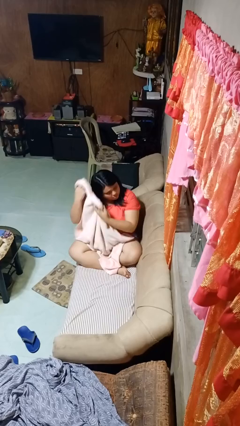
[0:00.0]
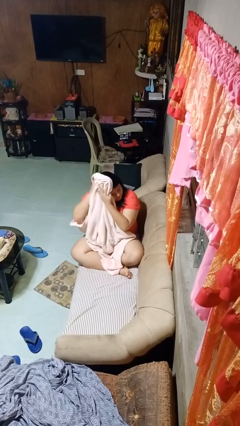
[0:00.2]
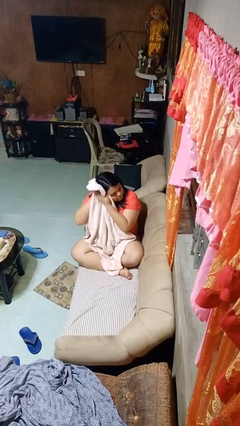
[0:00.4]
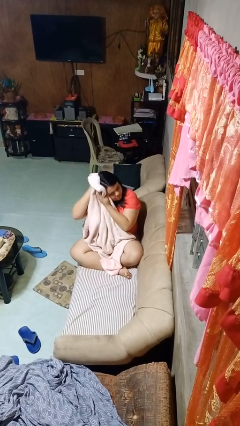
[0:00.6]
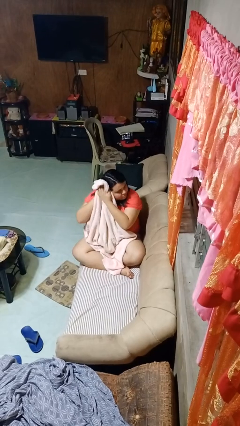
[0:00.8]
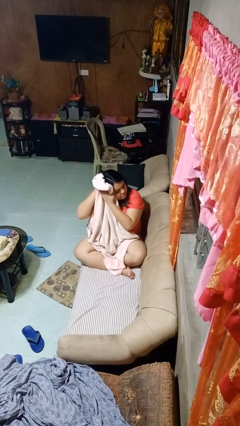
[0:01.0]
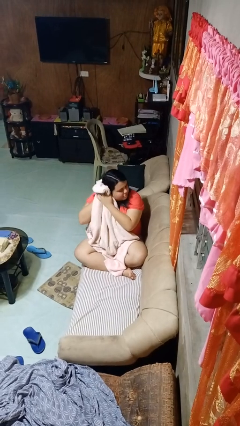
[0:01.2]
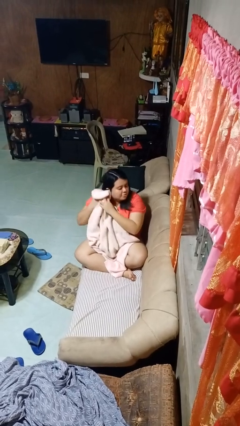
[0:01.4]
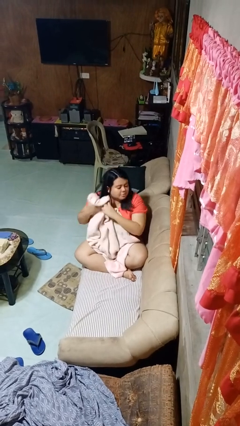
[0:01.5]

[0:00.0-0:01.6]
person dries hair with towel

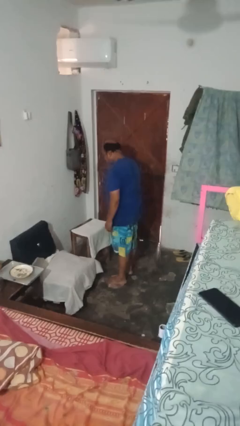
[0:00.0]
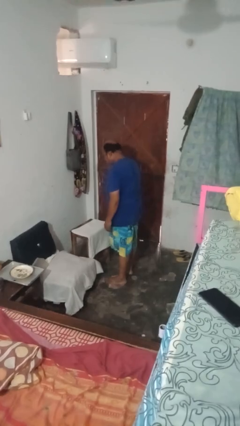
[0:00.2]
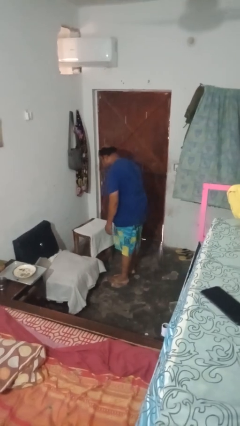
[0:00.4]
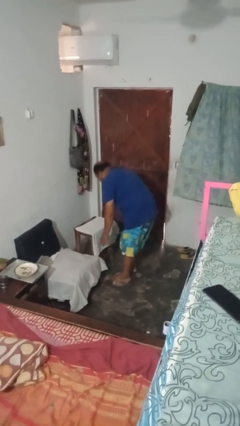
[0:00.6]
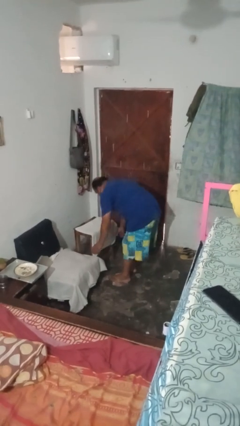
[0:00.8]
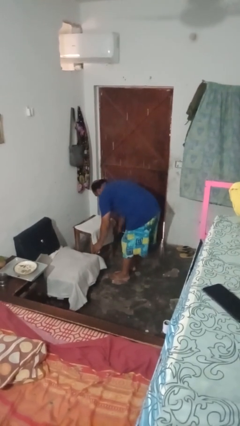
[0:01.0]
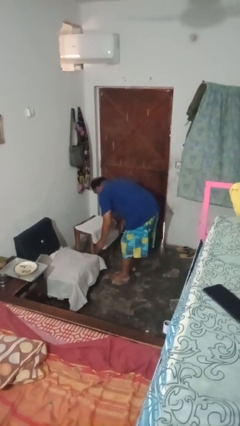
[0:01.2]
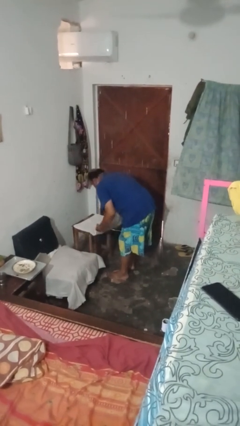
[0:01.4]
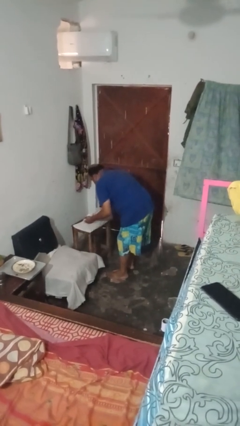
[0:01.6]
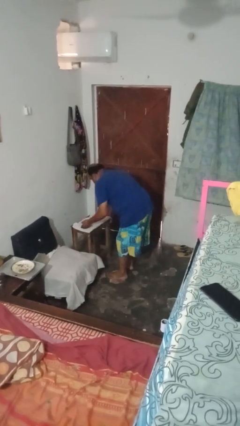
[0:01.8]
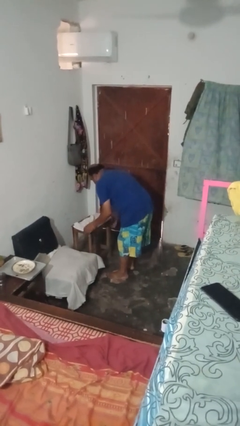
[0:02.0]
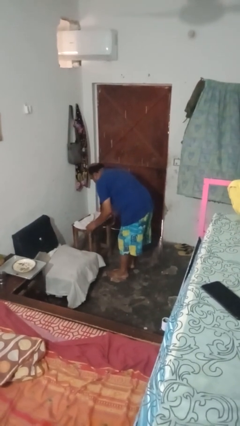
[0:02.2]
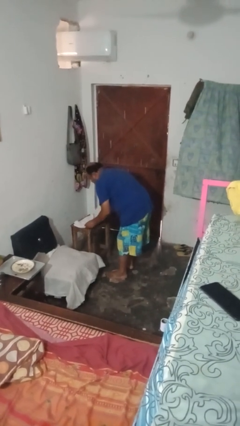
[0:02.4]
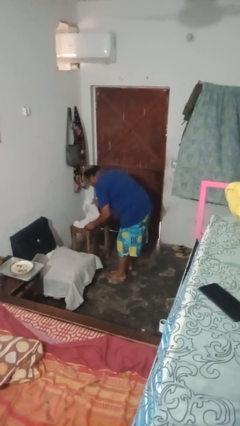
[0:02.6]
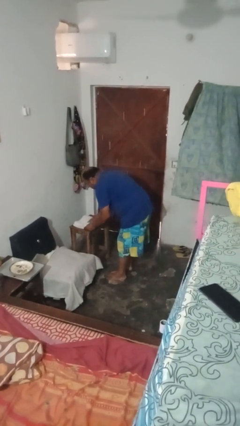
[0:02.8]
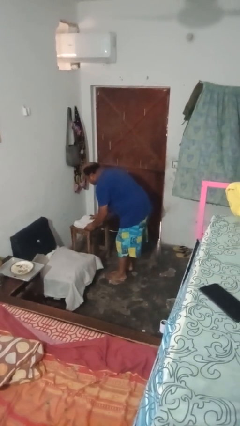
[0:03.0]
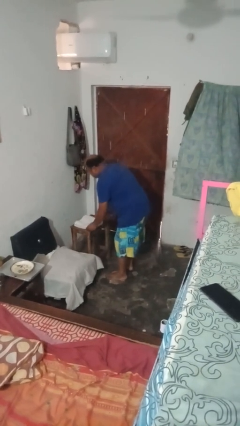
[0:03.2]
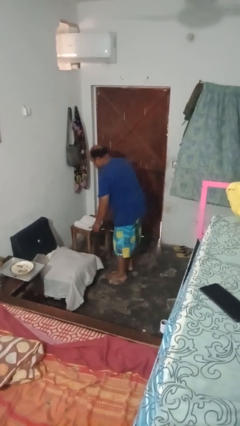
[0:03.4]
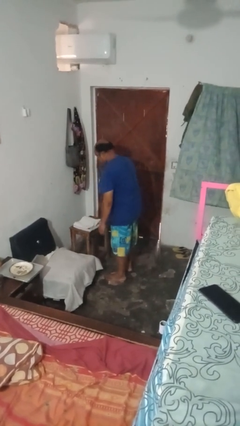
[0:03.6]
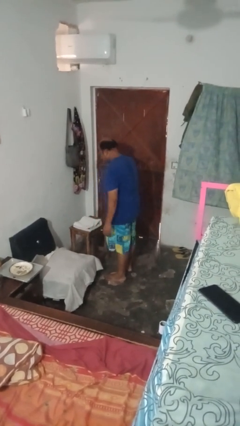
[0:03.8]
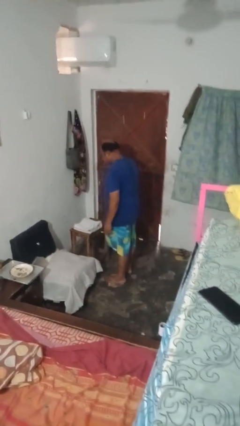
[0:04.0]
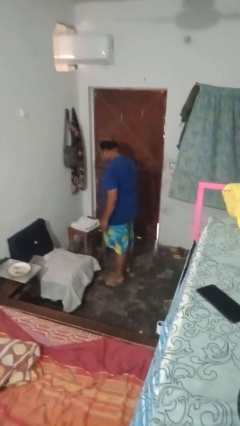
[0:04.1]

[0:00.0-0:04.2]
person folds towel

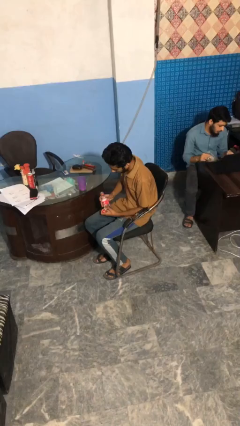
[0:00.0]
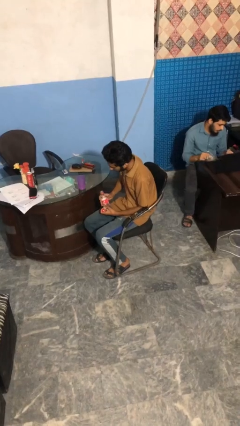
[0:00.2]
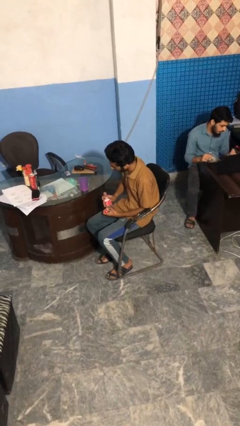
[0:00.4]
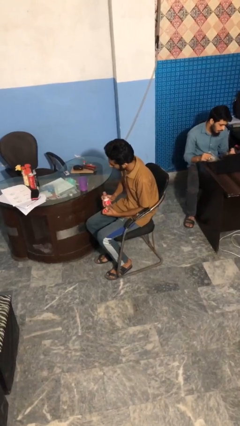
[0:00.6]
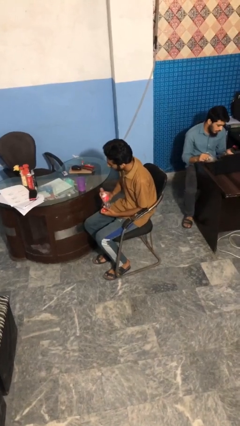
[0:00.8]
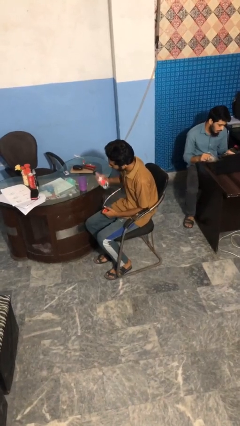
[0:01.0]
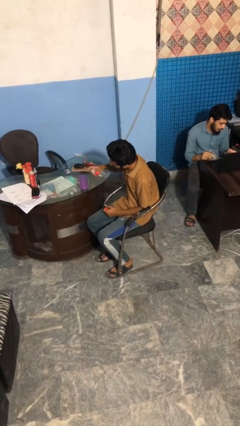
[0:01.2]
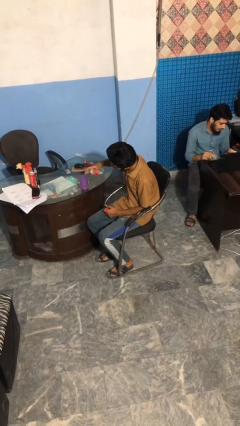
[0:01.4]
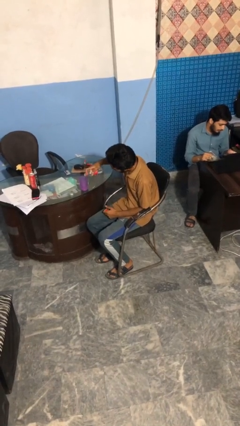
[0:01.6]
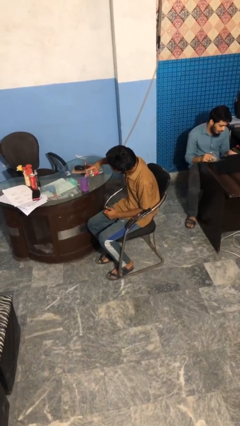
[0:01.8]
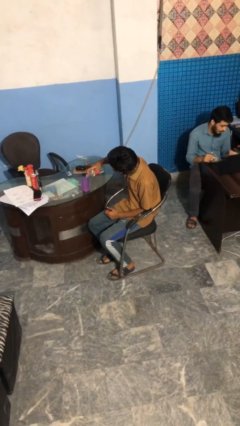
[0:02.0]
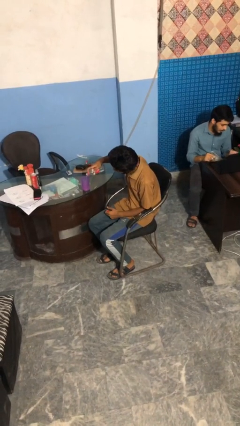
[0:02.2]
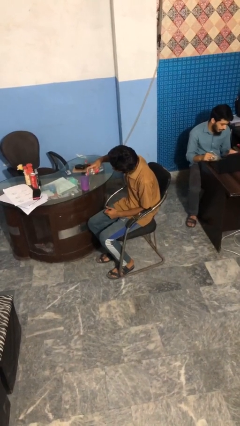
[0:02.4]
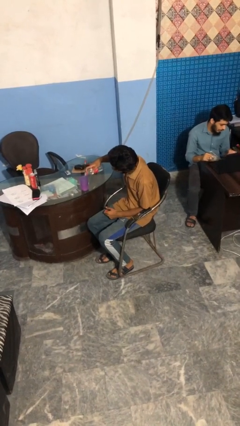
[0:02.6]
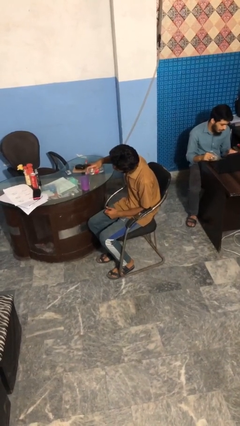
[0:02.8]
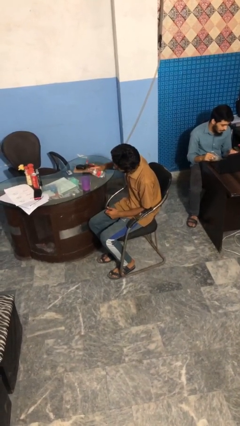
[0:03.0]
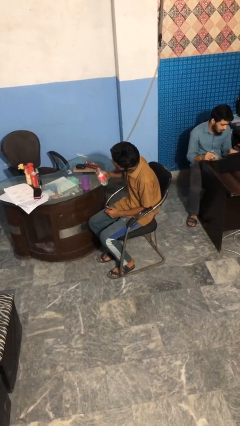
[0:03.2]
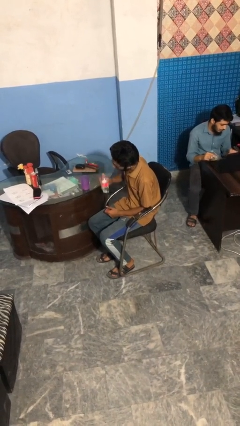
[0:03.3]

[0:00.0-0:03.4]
person pours liquid into cup

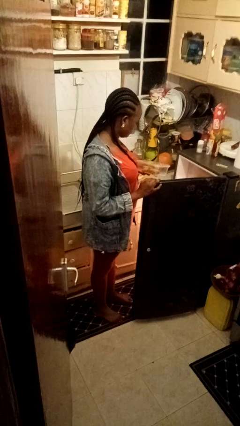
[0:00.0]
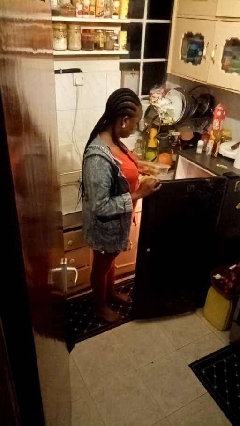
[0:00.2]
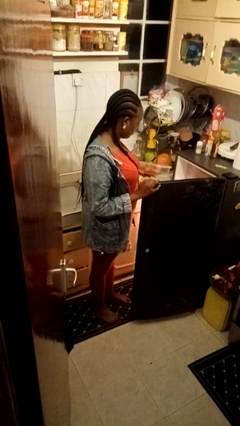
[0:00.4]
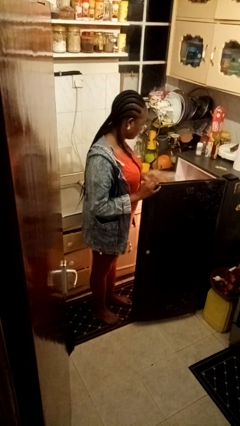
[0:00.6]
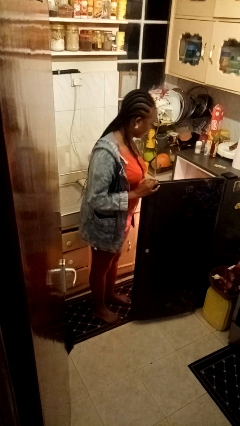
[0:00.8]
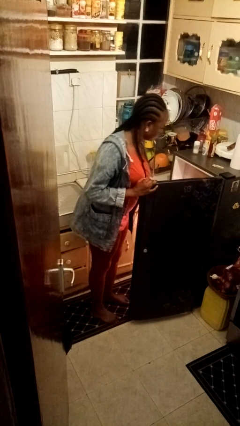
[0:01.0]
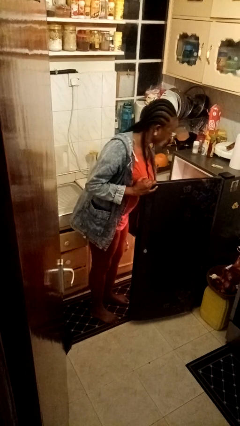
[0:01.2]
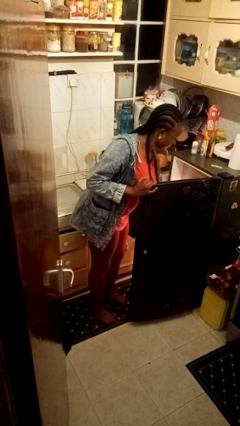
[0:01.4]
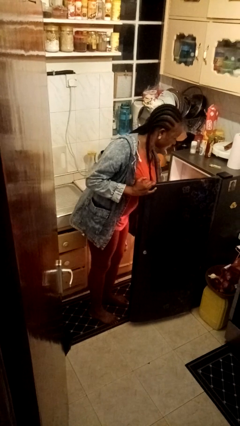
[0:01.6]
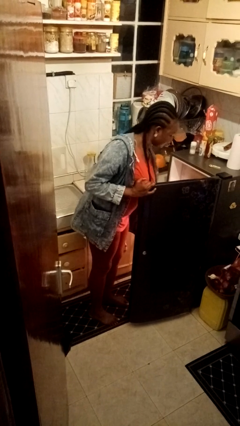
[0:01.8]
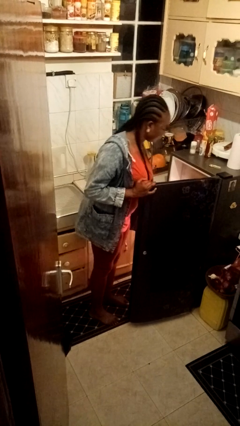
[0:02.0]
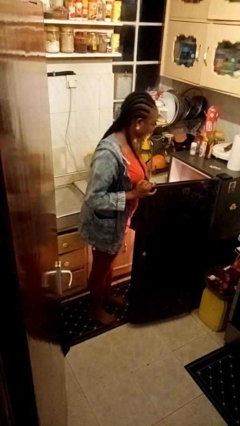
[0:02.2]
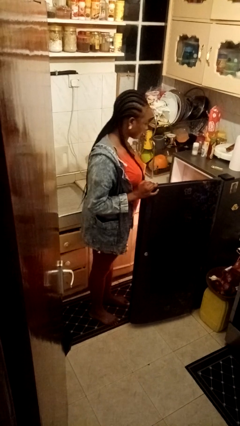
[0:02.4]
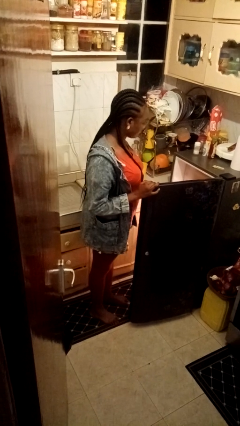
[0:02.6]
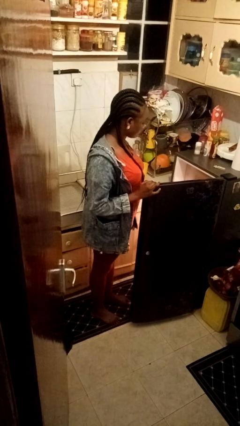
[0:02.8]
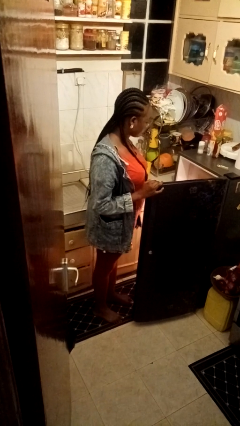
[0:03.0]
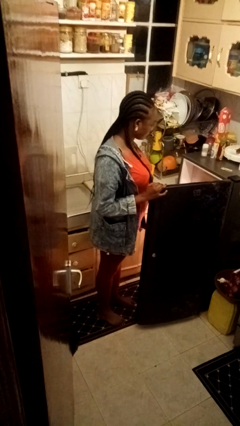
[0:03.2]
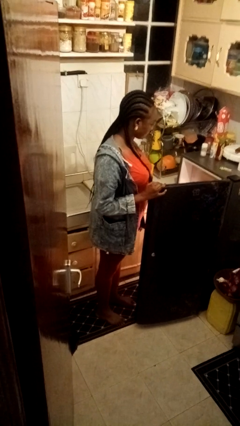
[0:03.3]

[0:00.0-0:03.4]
person puts object into refrigerator

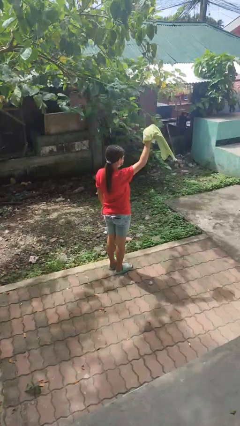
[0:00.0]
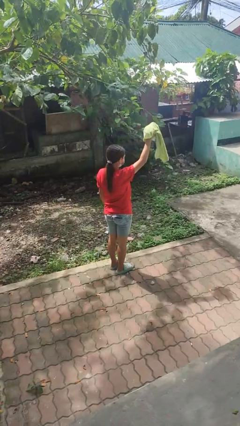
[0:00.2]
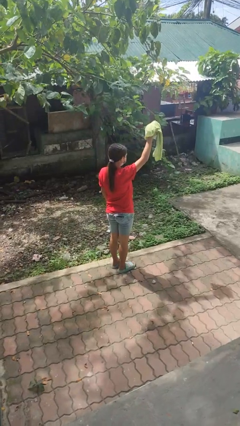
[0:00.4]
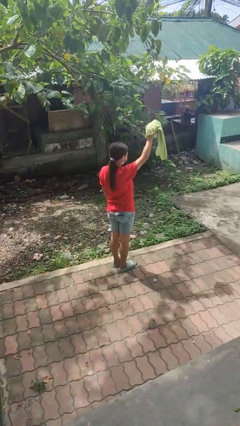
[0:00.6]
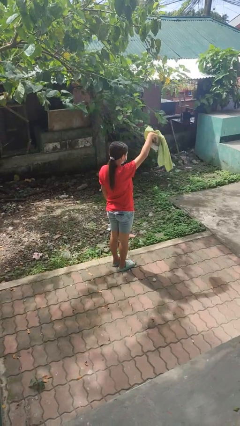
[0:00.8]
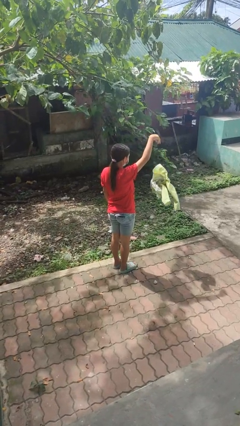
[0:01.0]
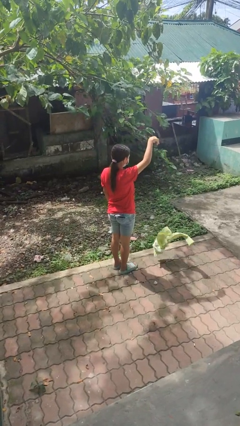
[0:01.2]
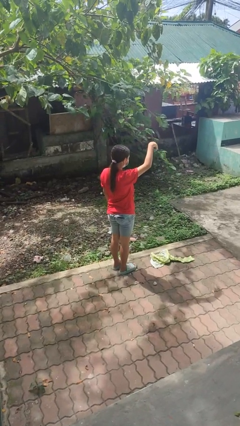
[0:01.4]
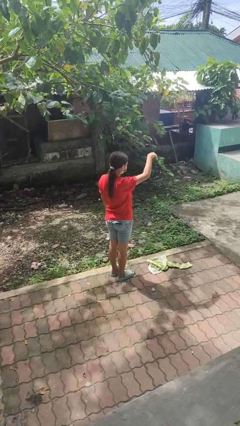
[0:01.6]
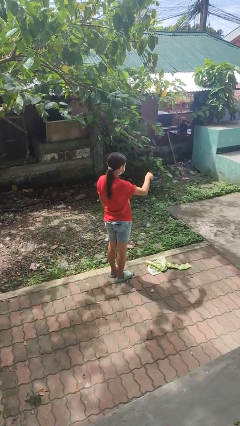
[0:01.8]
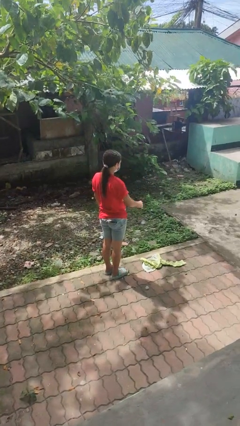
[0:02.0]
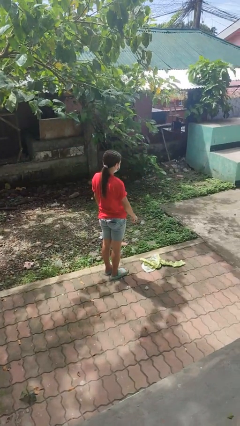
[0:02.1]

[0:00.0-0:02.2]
person drops object

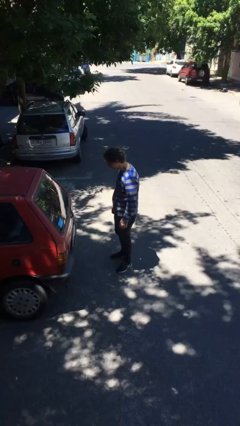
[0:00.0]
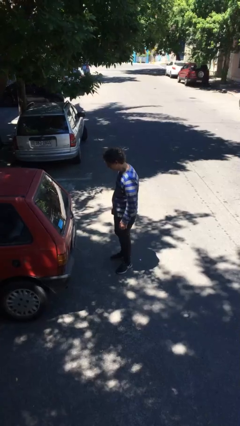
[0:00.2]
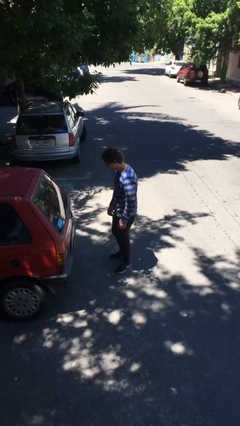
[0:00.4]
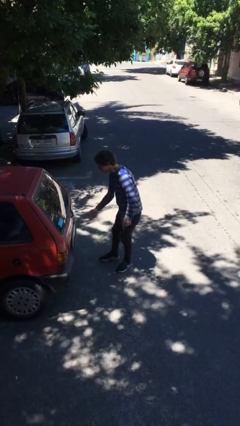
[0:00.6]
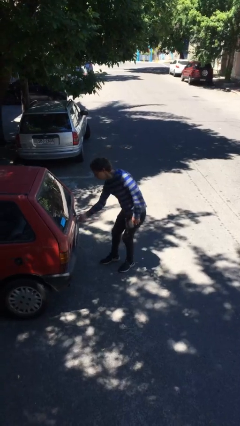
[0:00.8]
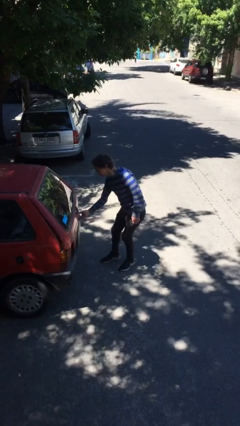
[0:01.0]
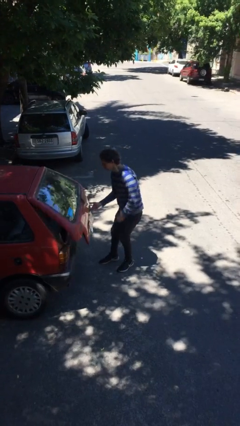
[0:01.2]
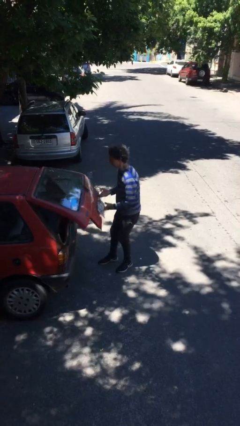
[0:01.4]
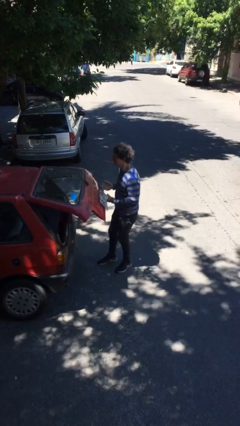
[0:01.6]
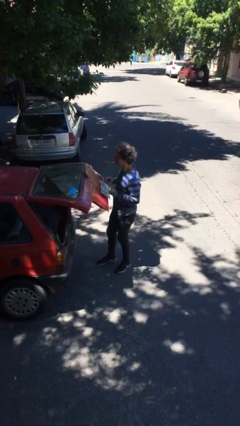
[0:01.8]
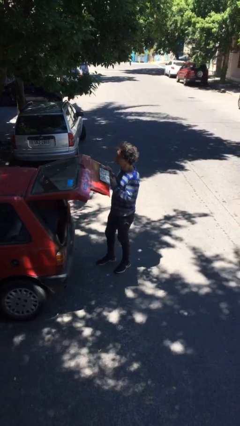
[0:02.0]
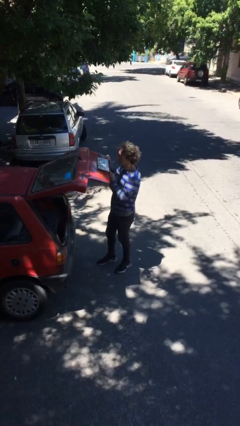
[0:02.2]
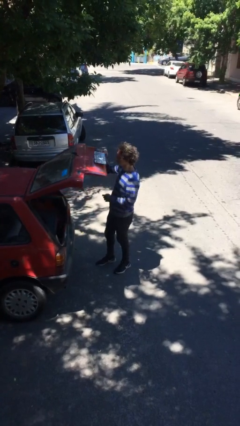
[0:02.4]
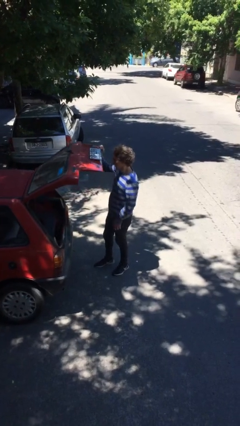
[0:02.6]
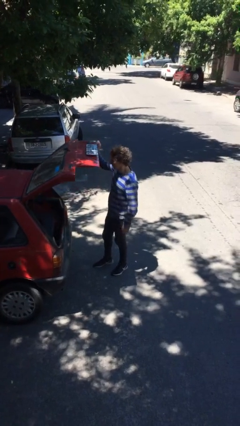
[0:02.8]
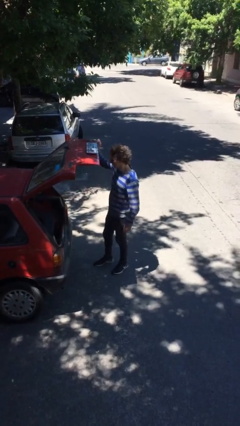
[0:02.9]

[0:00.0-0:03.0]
person opens car trunk
